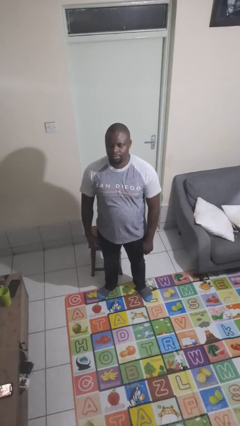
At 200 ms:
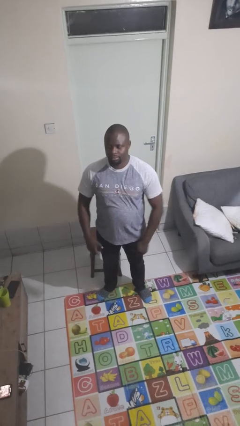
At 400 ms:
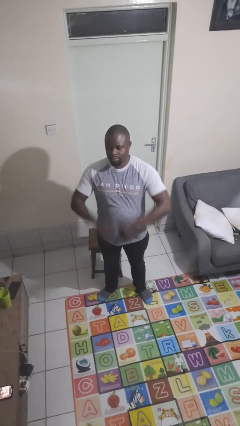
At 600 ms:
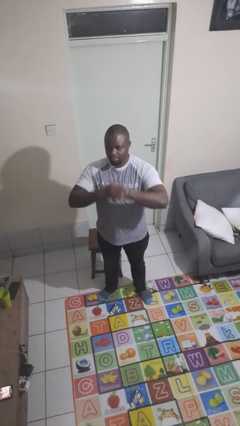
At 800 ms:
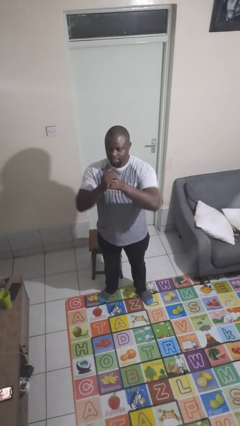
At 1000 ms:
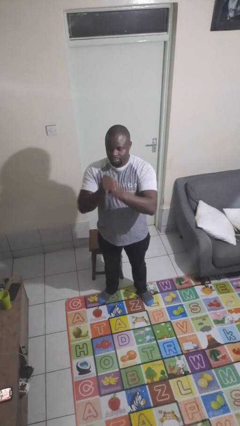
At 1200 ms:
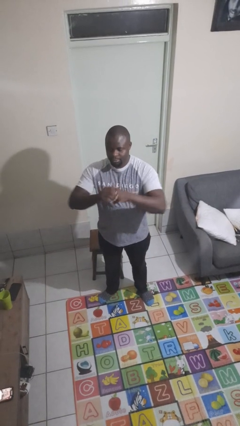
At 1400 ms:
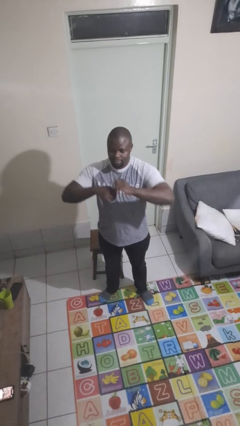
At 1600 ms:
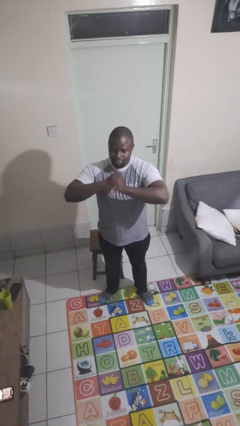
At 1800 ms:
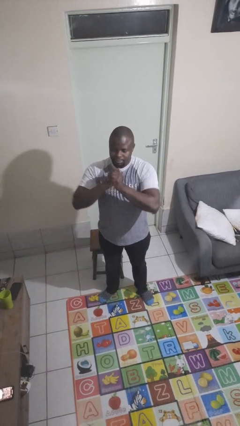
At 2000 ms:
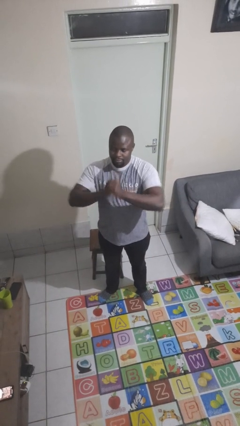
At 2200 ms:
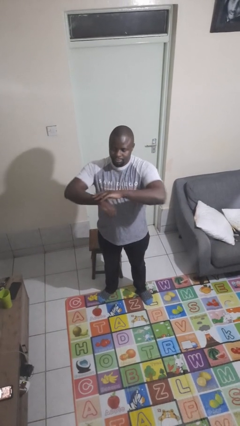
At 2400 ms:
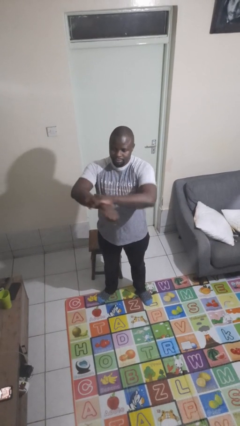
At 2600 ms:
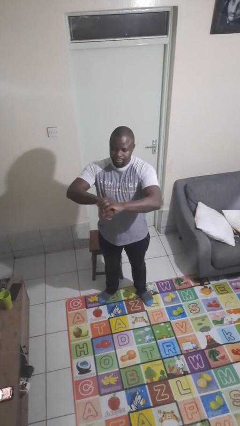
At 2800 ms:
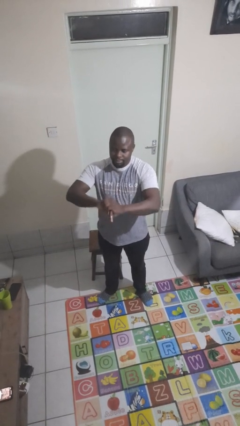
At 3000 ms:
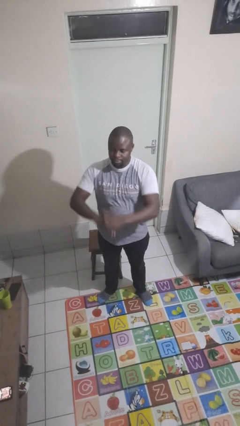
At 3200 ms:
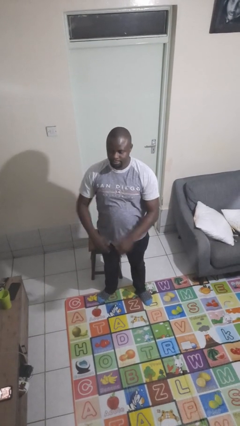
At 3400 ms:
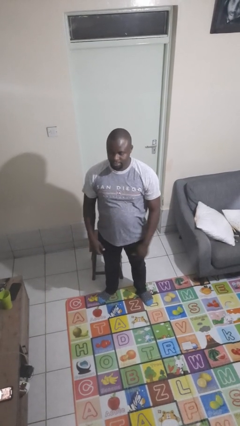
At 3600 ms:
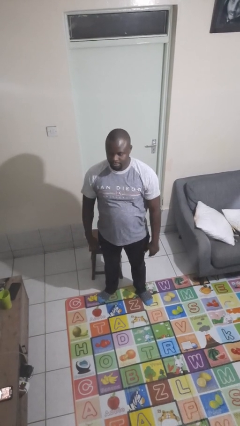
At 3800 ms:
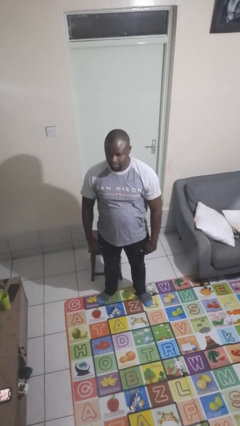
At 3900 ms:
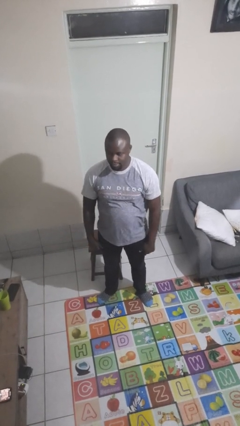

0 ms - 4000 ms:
person cracks knuckles

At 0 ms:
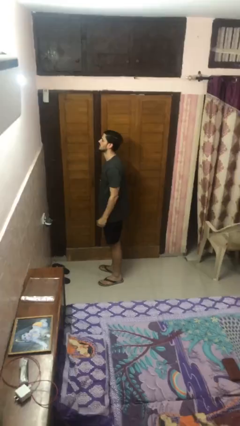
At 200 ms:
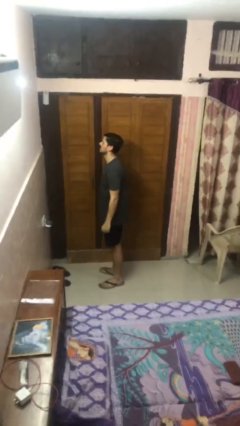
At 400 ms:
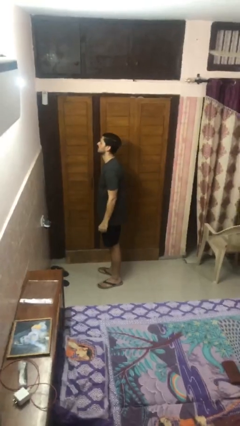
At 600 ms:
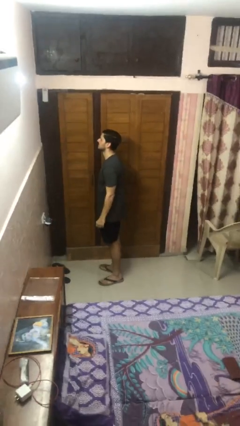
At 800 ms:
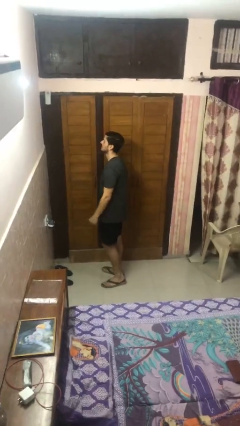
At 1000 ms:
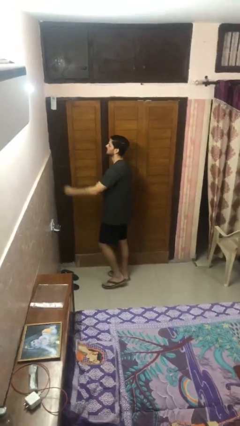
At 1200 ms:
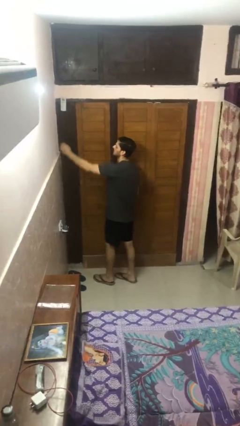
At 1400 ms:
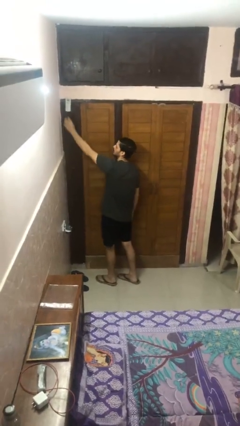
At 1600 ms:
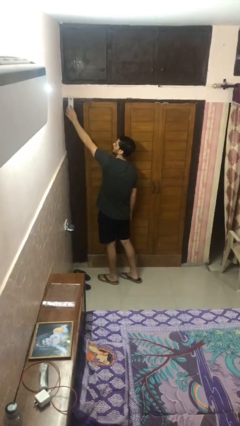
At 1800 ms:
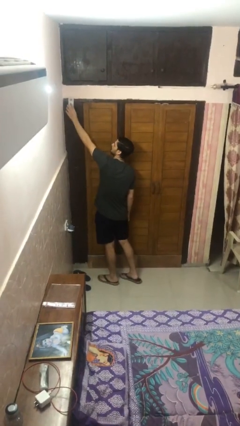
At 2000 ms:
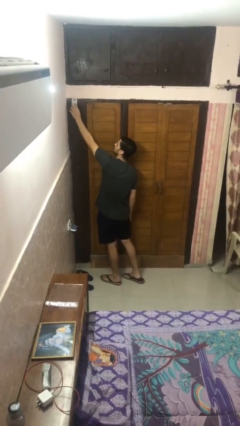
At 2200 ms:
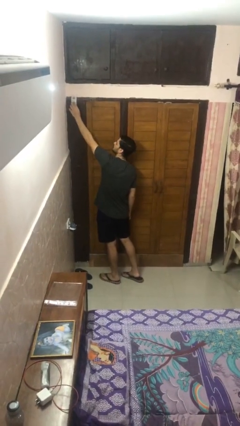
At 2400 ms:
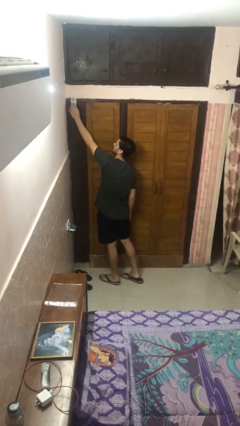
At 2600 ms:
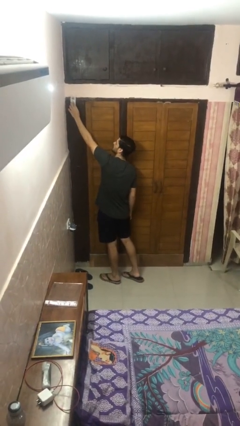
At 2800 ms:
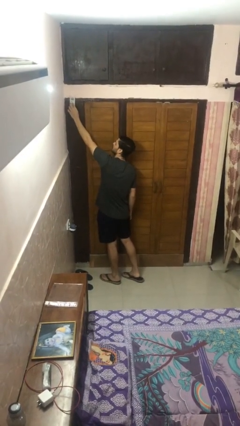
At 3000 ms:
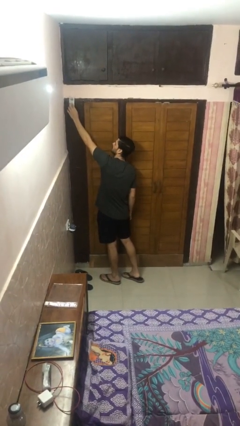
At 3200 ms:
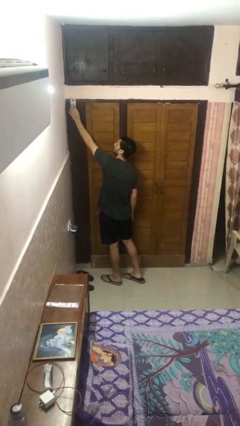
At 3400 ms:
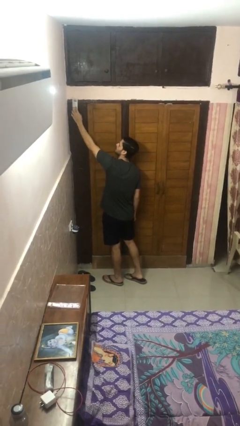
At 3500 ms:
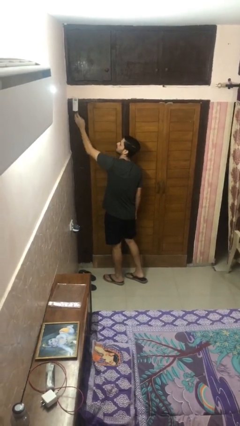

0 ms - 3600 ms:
person adjusts thermostat

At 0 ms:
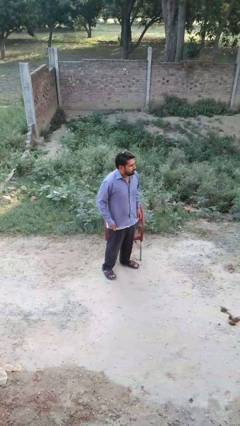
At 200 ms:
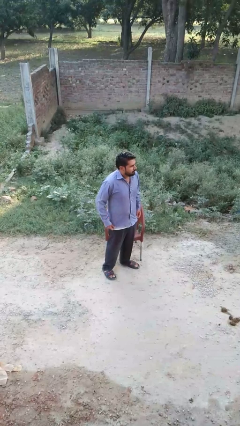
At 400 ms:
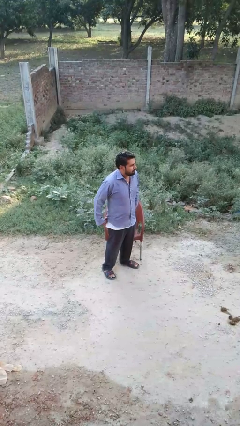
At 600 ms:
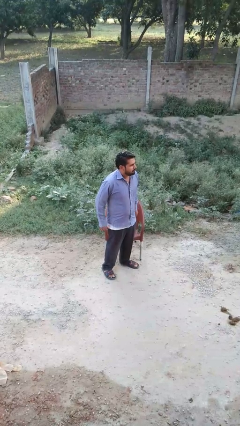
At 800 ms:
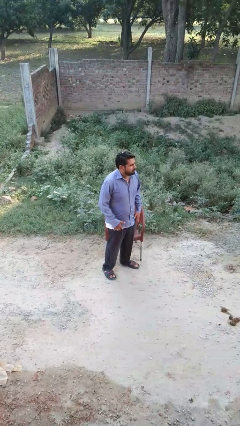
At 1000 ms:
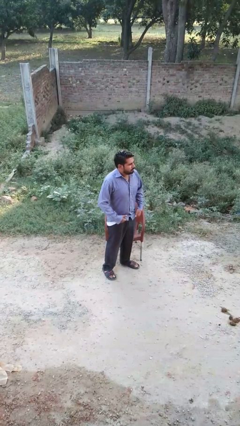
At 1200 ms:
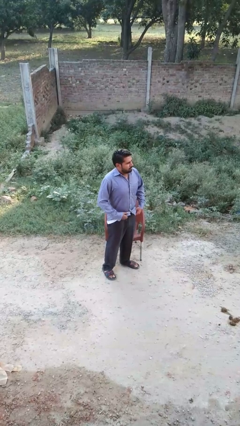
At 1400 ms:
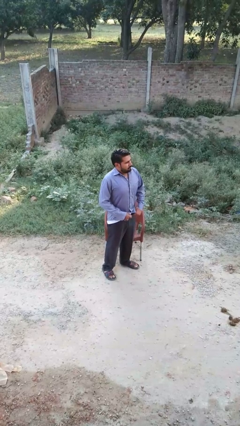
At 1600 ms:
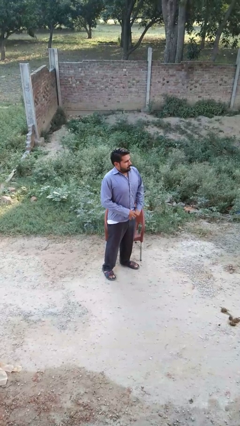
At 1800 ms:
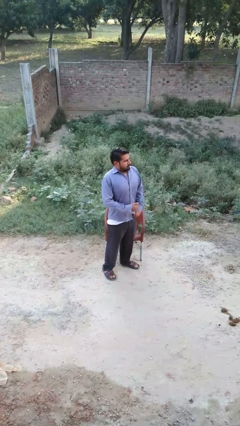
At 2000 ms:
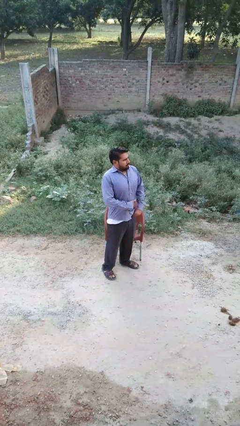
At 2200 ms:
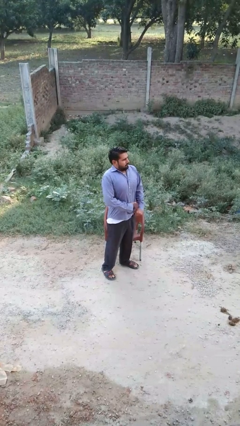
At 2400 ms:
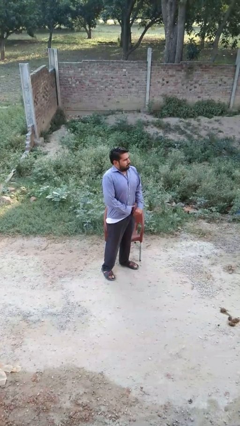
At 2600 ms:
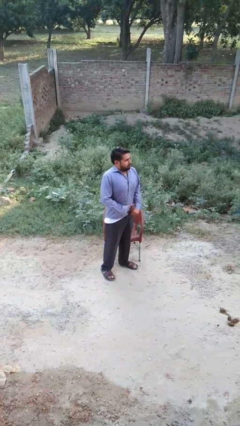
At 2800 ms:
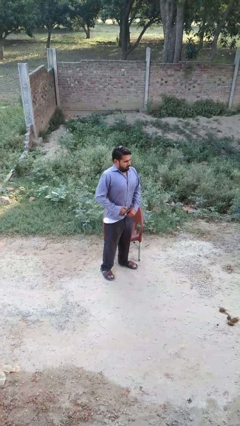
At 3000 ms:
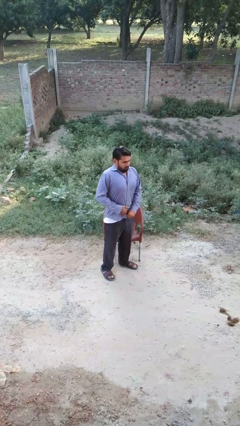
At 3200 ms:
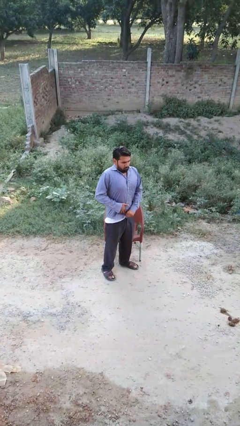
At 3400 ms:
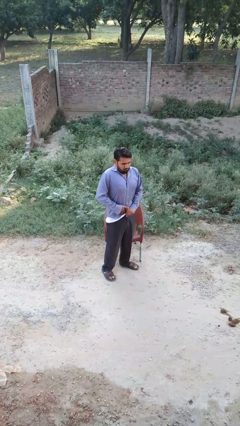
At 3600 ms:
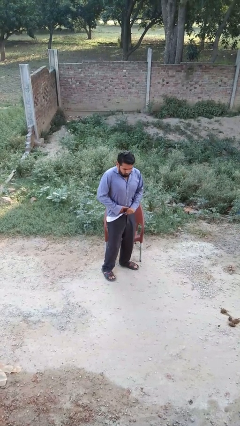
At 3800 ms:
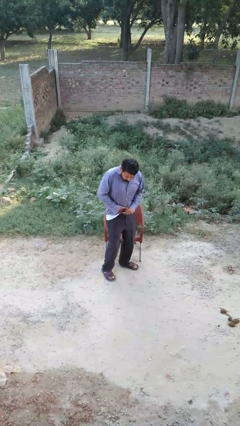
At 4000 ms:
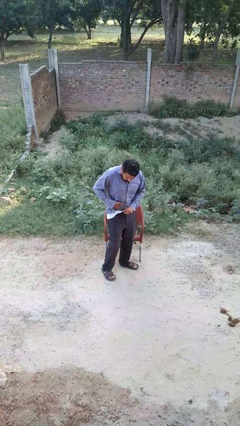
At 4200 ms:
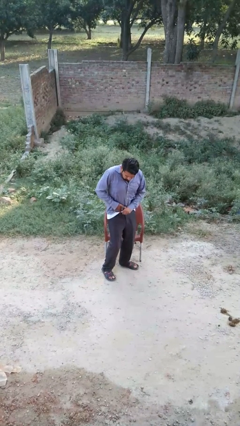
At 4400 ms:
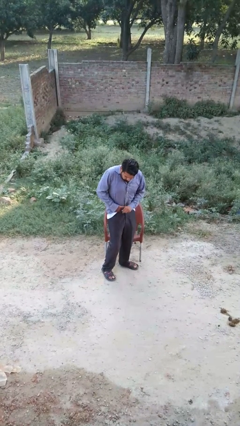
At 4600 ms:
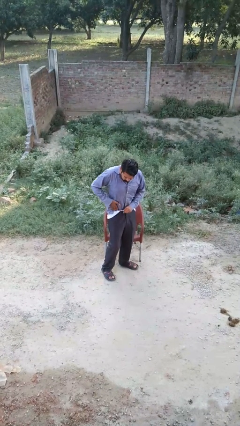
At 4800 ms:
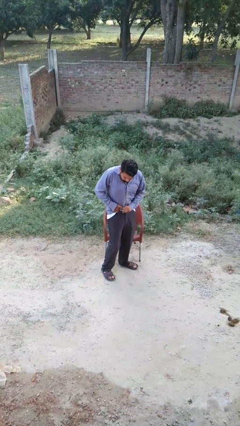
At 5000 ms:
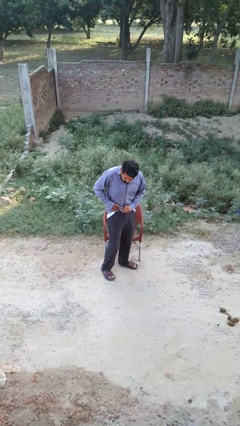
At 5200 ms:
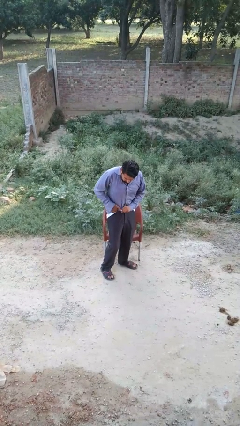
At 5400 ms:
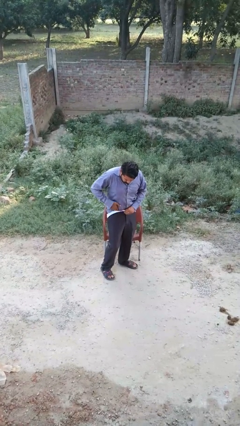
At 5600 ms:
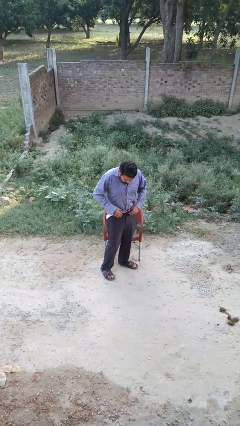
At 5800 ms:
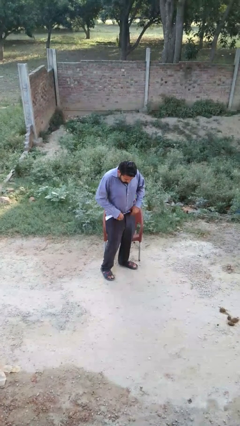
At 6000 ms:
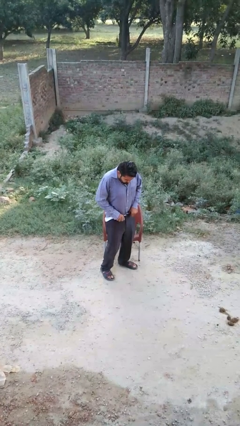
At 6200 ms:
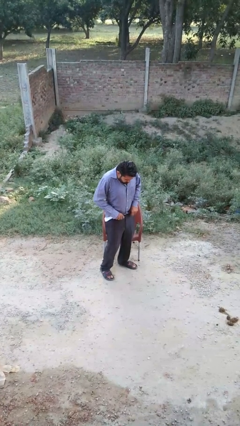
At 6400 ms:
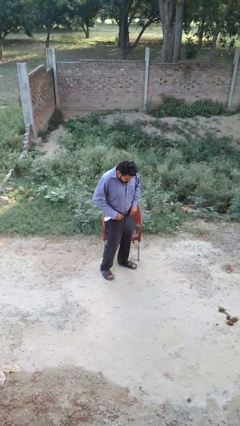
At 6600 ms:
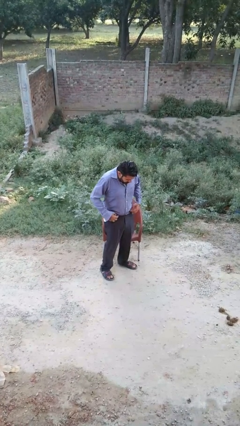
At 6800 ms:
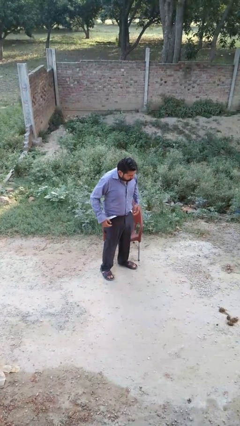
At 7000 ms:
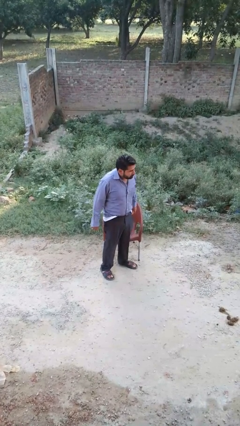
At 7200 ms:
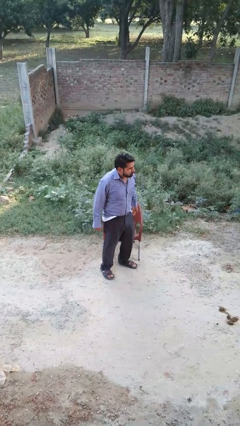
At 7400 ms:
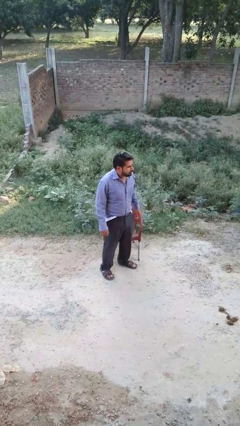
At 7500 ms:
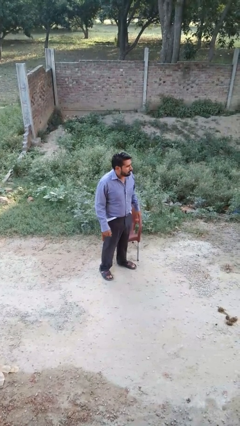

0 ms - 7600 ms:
person tucks in shirt

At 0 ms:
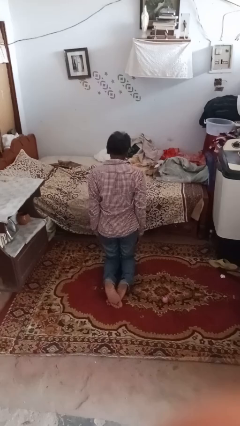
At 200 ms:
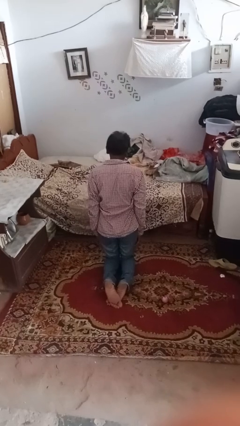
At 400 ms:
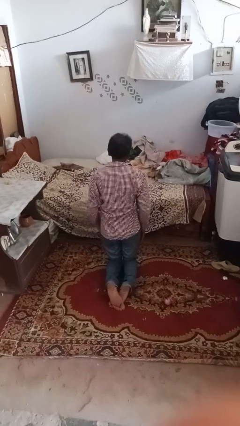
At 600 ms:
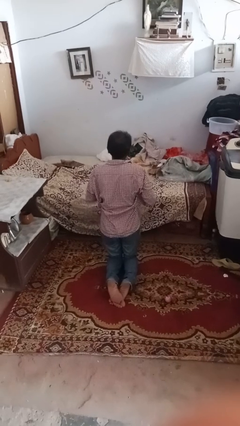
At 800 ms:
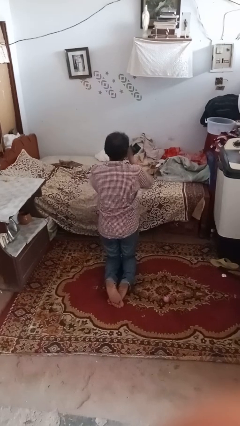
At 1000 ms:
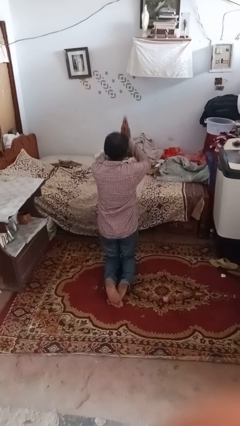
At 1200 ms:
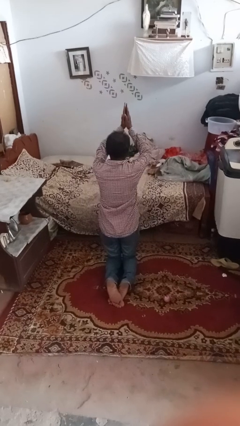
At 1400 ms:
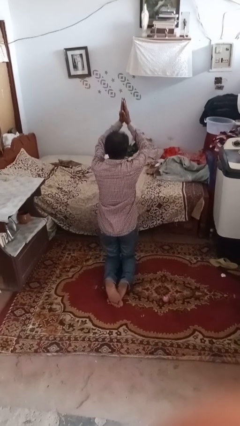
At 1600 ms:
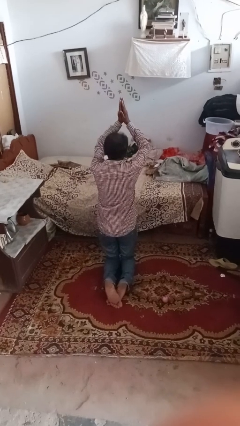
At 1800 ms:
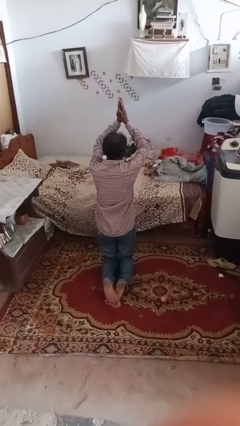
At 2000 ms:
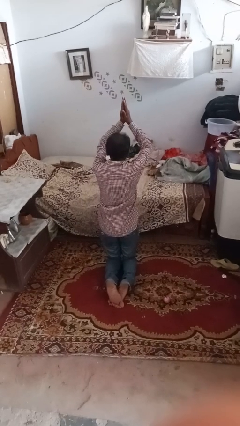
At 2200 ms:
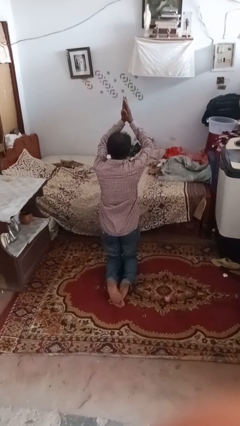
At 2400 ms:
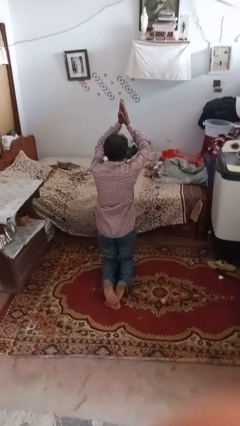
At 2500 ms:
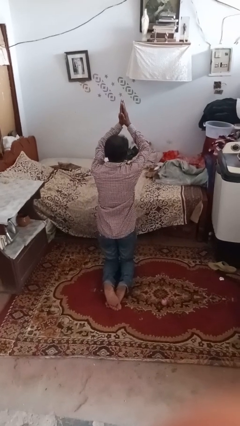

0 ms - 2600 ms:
person prays
